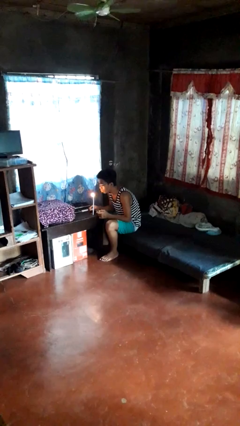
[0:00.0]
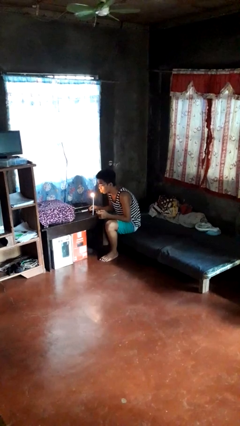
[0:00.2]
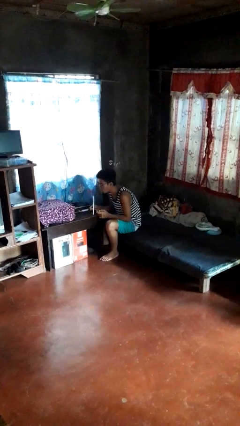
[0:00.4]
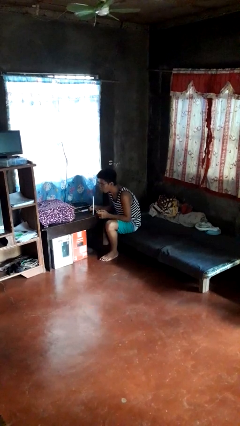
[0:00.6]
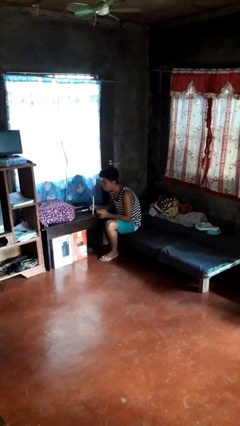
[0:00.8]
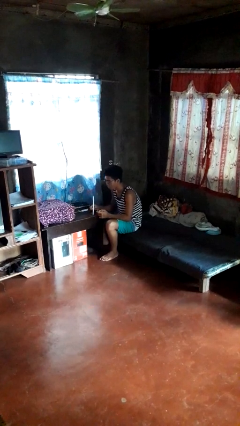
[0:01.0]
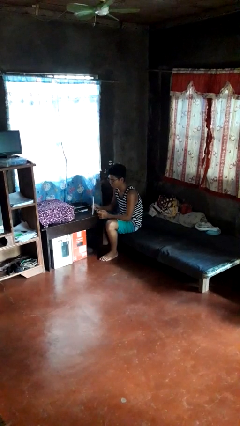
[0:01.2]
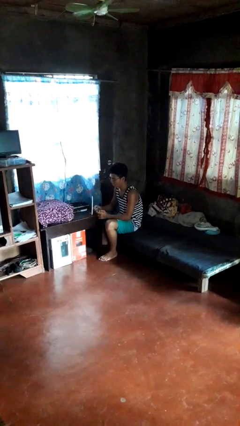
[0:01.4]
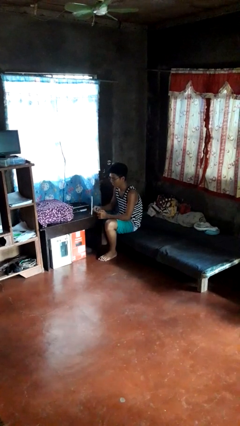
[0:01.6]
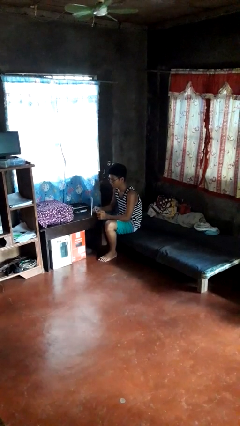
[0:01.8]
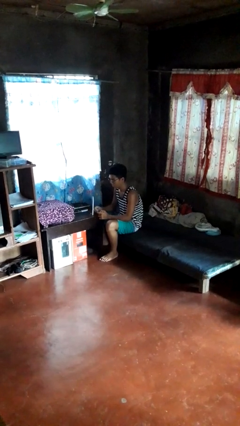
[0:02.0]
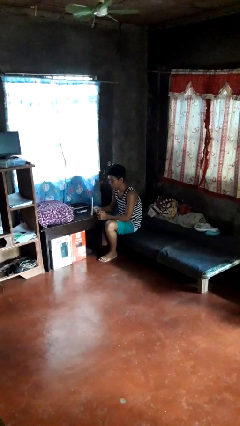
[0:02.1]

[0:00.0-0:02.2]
person extinguishes candle

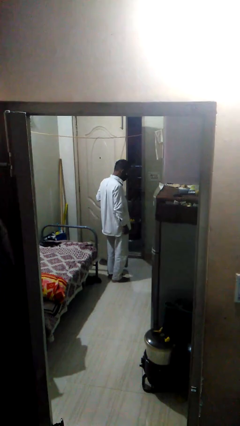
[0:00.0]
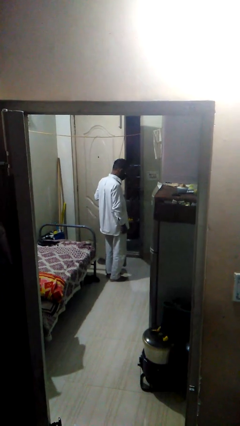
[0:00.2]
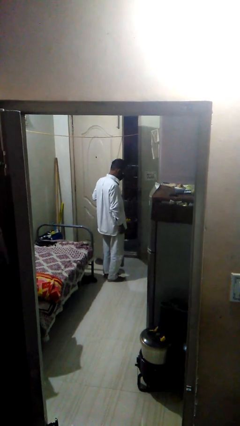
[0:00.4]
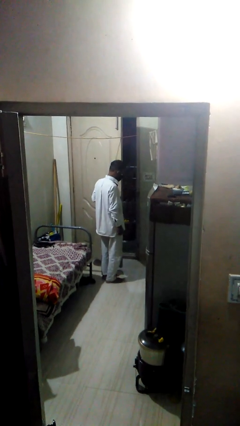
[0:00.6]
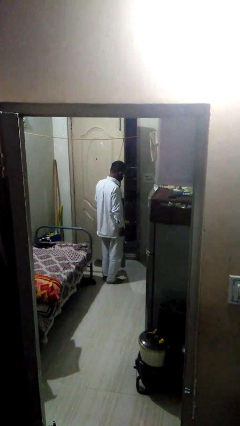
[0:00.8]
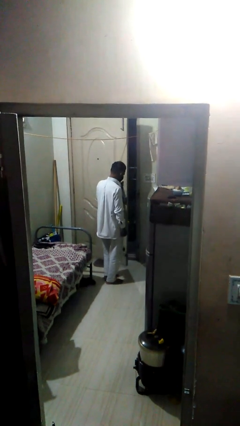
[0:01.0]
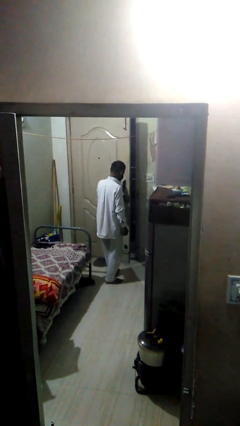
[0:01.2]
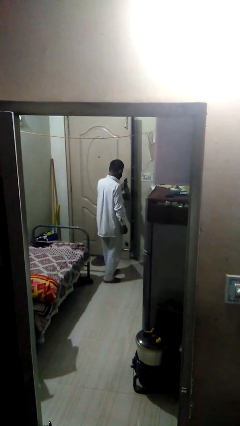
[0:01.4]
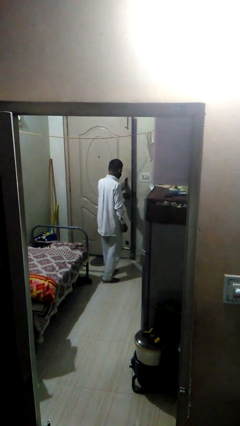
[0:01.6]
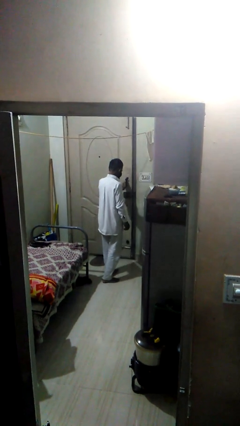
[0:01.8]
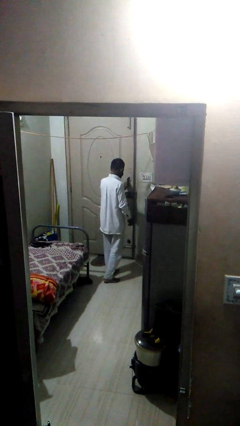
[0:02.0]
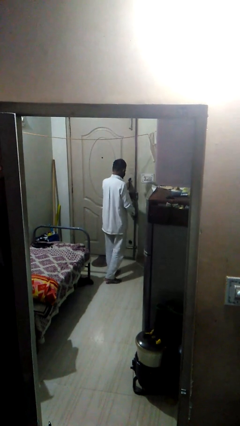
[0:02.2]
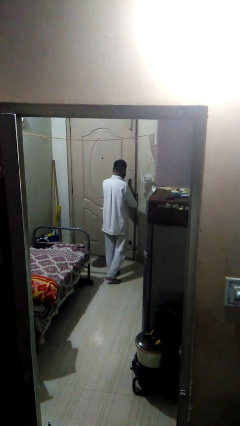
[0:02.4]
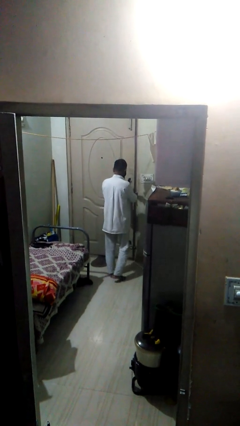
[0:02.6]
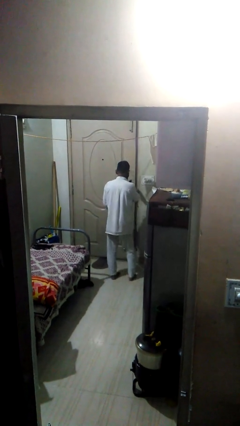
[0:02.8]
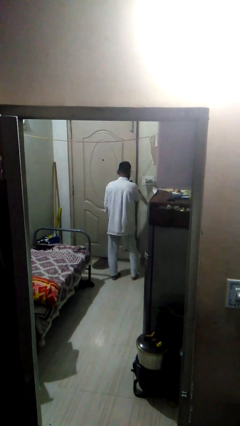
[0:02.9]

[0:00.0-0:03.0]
person closes facility door

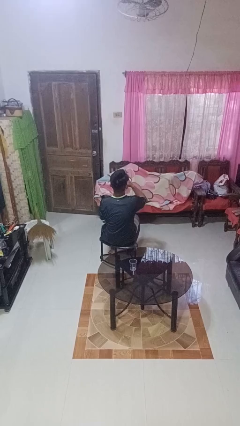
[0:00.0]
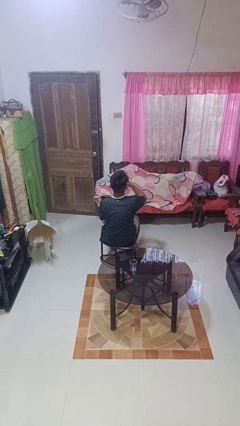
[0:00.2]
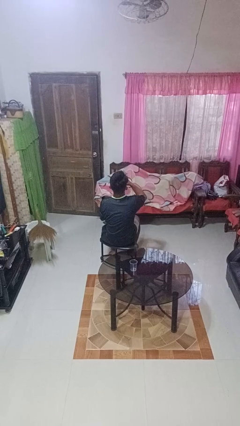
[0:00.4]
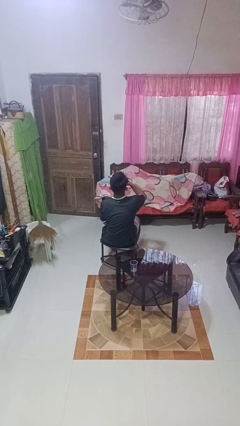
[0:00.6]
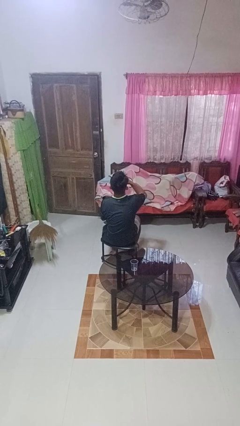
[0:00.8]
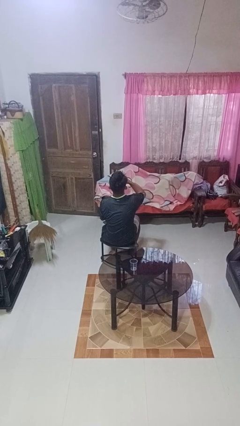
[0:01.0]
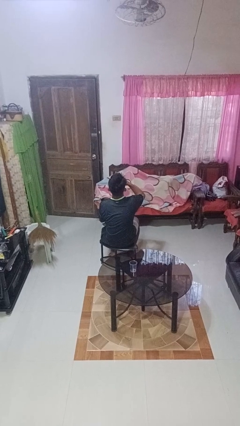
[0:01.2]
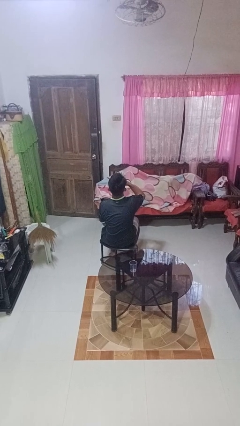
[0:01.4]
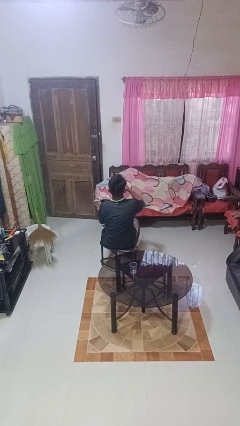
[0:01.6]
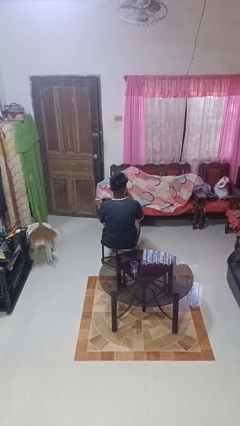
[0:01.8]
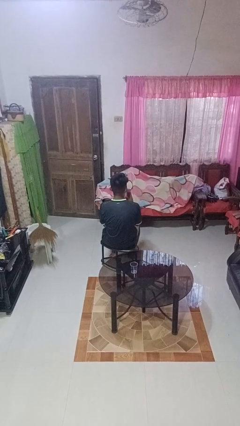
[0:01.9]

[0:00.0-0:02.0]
person drinks from beverage can

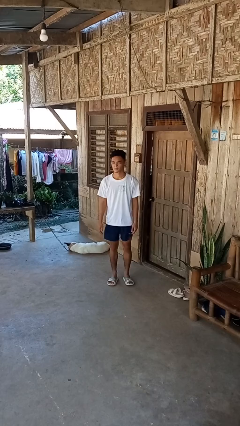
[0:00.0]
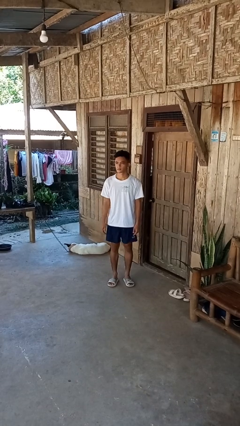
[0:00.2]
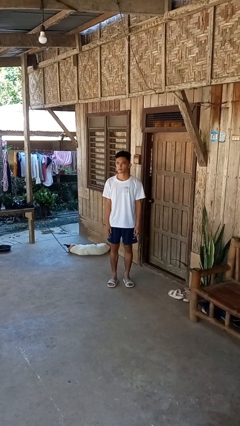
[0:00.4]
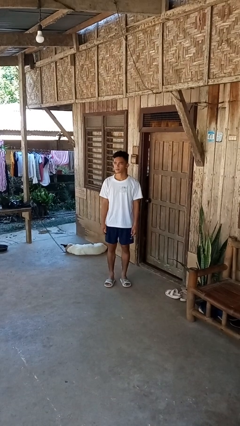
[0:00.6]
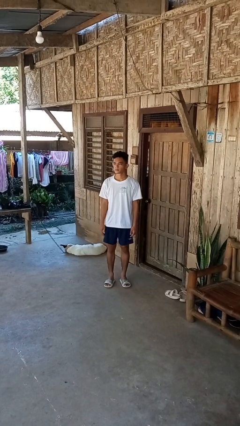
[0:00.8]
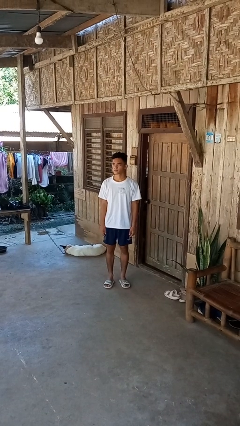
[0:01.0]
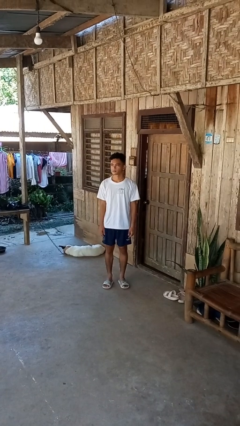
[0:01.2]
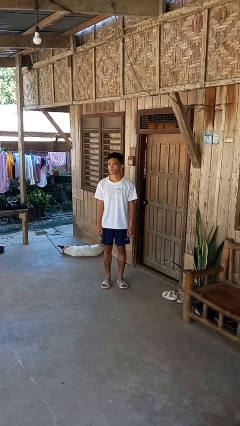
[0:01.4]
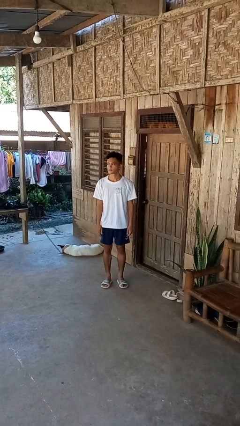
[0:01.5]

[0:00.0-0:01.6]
person stands up from floor

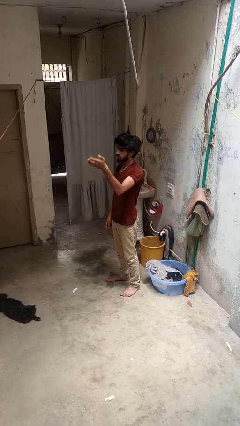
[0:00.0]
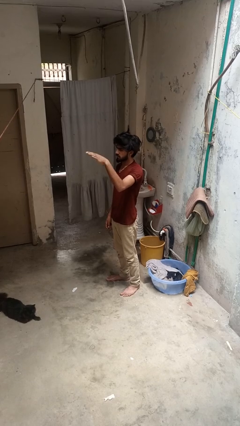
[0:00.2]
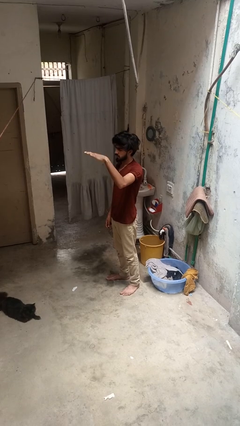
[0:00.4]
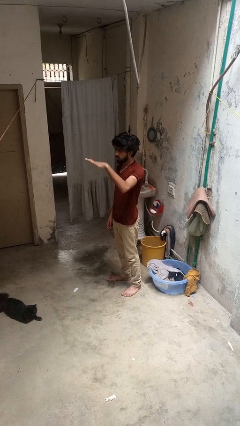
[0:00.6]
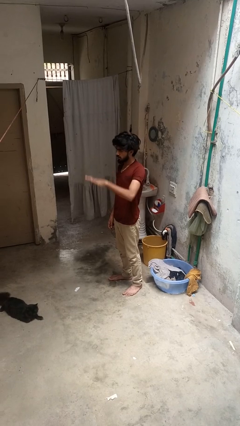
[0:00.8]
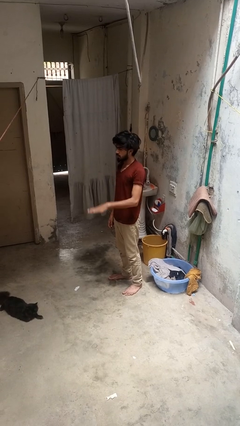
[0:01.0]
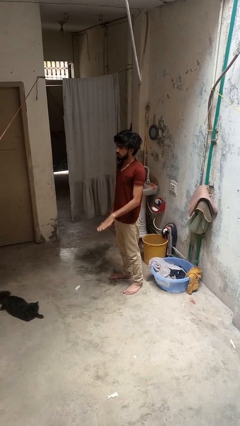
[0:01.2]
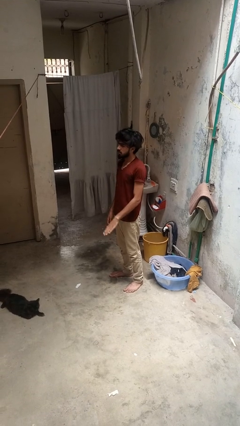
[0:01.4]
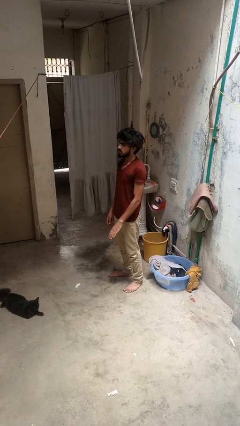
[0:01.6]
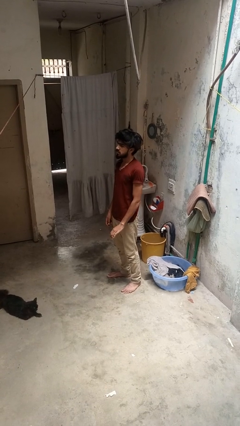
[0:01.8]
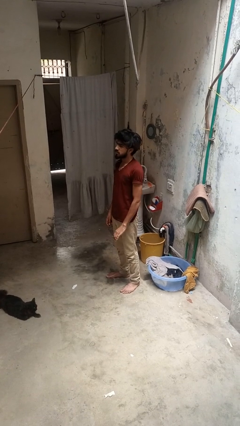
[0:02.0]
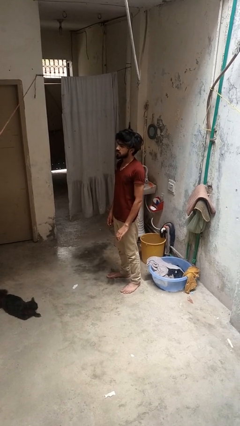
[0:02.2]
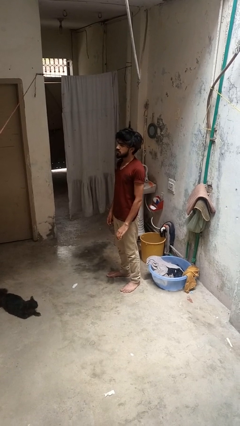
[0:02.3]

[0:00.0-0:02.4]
person gestures swipe down

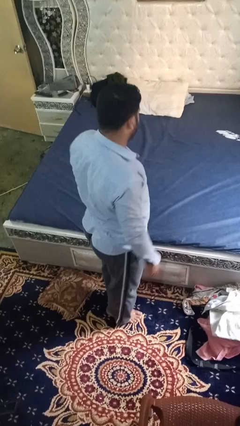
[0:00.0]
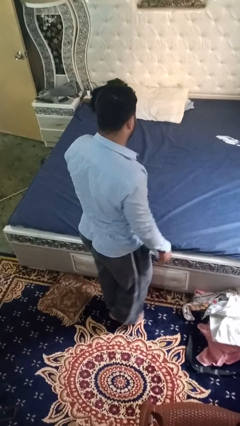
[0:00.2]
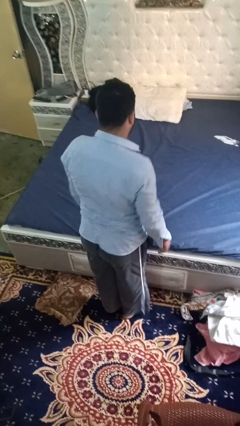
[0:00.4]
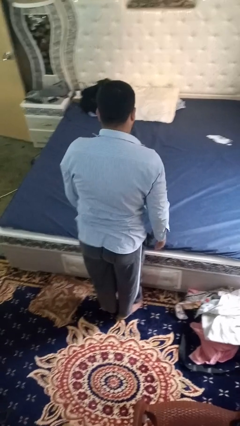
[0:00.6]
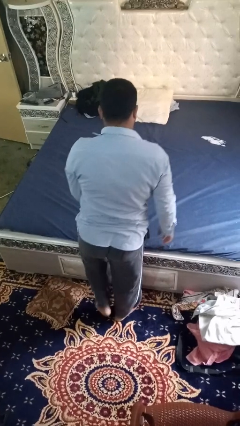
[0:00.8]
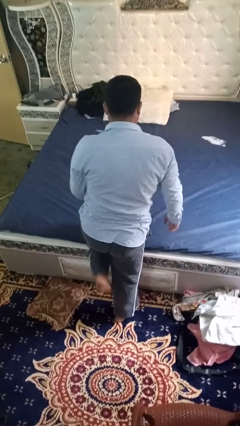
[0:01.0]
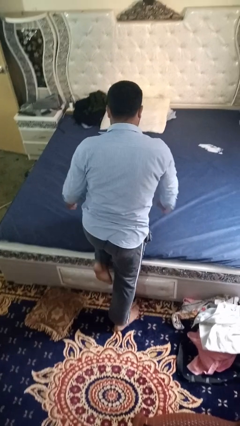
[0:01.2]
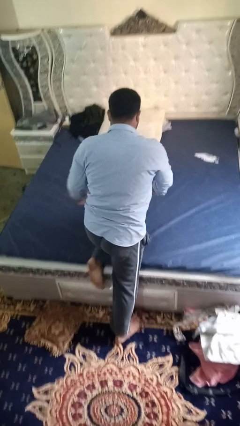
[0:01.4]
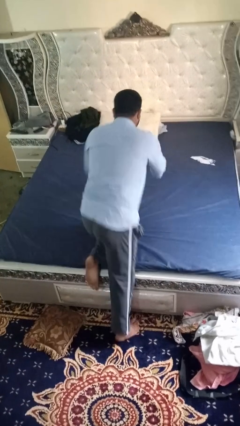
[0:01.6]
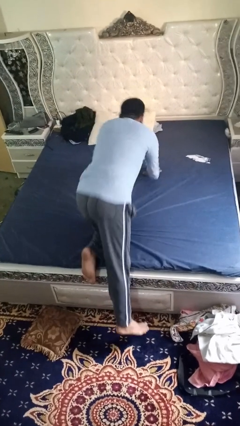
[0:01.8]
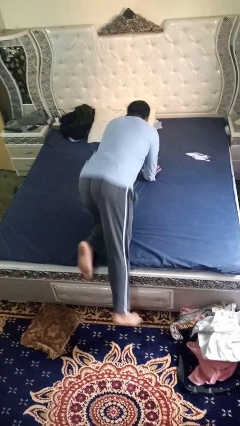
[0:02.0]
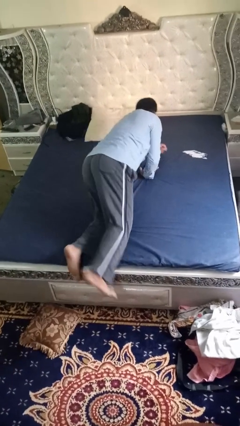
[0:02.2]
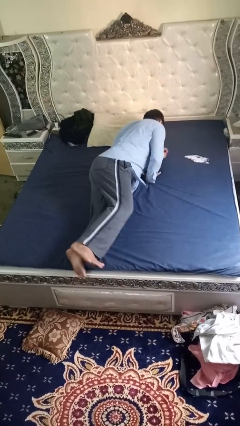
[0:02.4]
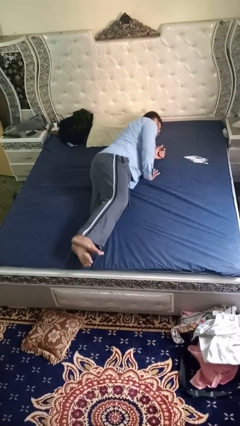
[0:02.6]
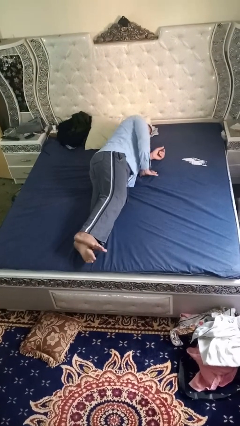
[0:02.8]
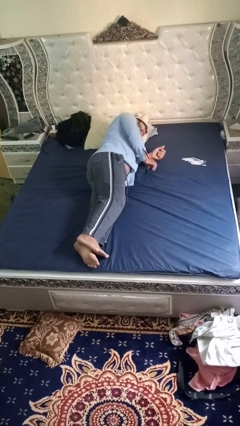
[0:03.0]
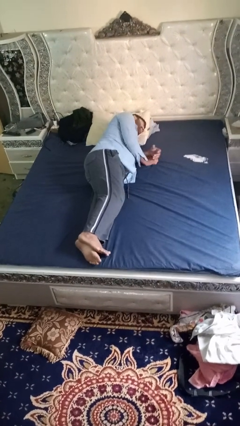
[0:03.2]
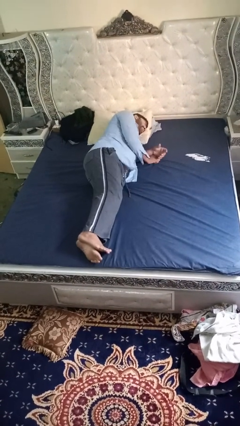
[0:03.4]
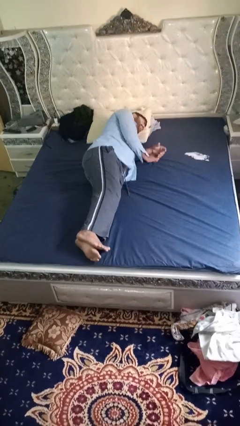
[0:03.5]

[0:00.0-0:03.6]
person lies down on bed

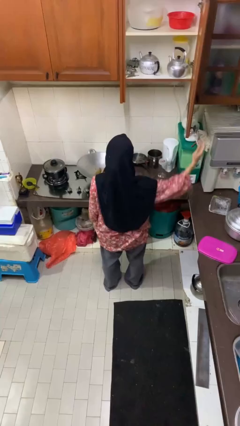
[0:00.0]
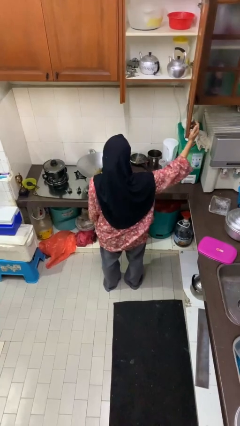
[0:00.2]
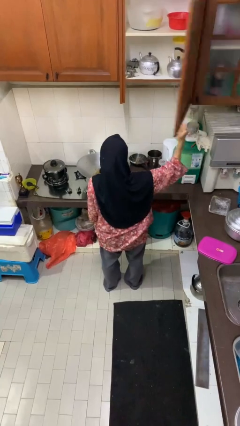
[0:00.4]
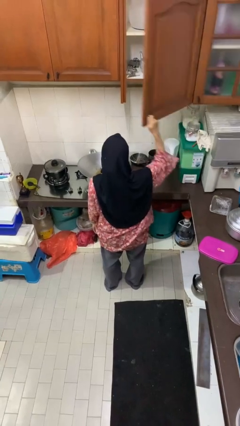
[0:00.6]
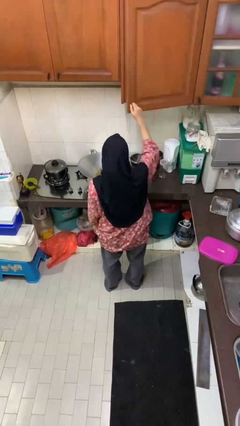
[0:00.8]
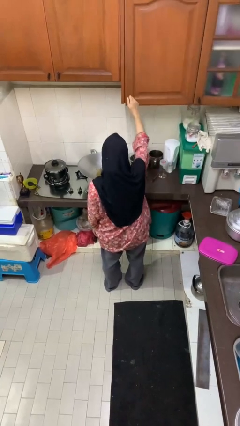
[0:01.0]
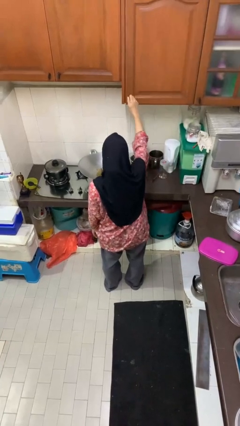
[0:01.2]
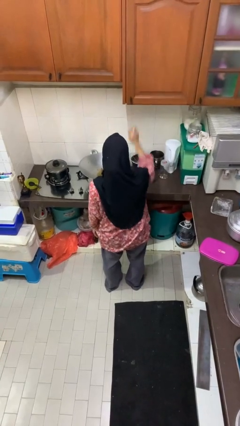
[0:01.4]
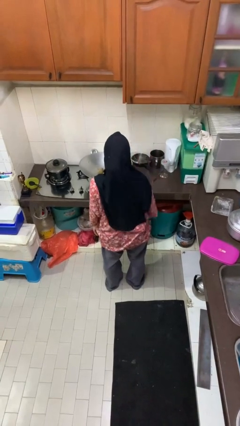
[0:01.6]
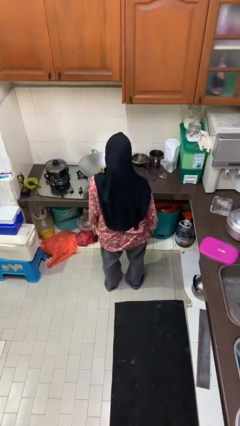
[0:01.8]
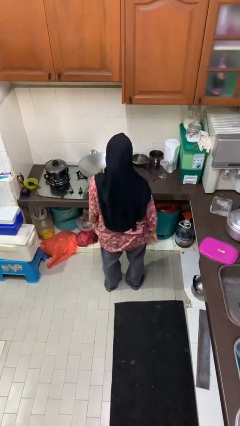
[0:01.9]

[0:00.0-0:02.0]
person closes cabinet

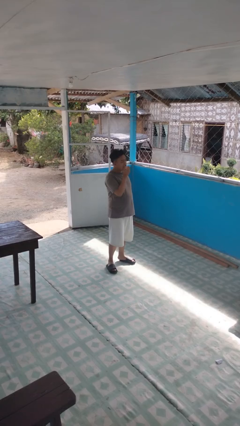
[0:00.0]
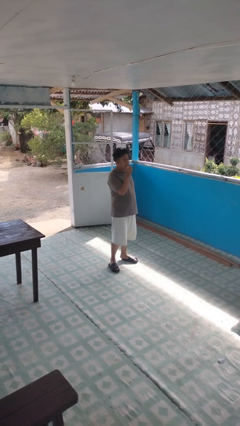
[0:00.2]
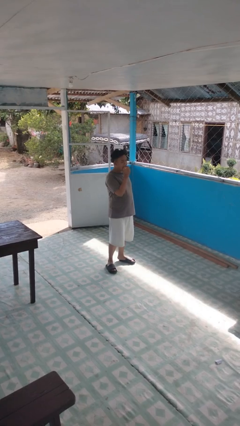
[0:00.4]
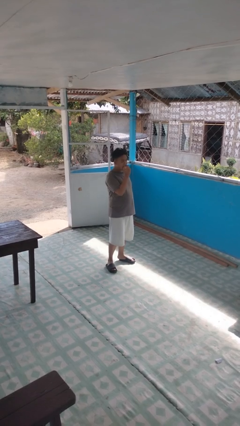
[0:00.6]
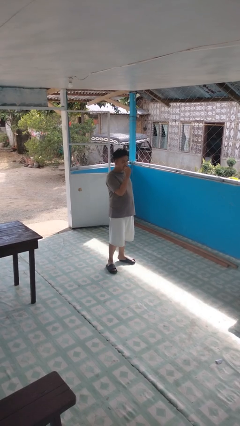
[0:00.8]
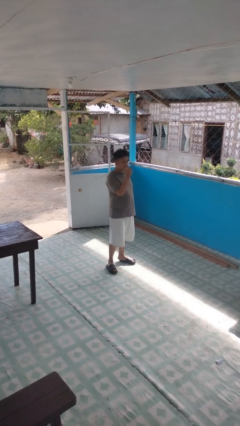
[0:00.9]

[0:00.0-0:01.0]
person eats apple
